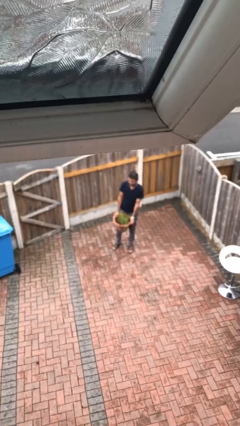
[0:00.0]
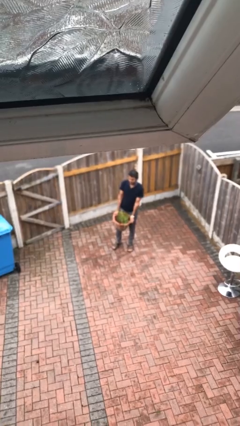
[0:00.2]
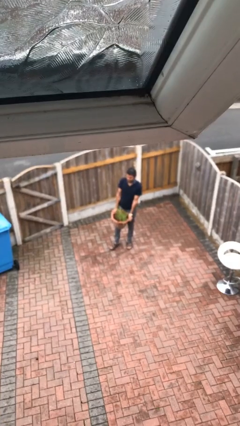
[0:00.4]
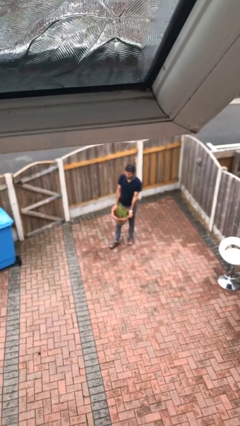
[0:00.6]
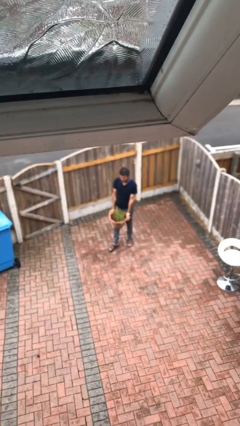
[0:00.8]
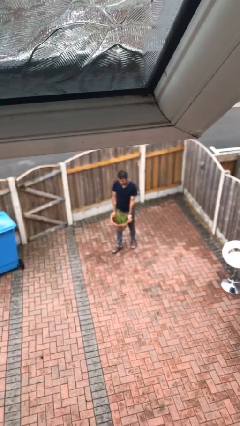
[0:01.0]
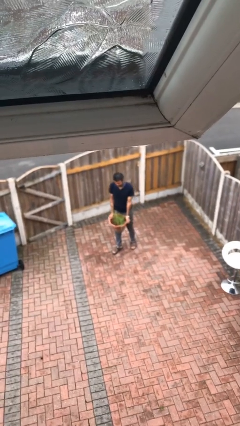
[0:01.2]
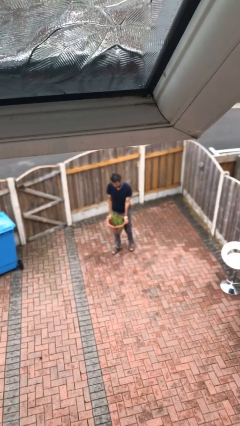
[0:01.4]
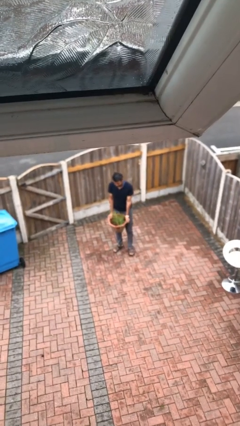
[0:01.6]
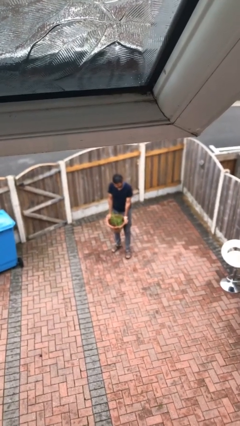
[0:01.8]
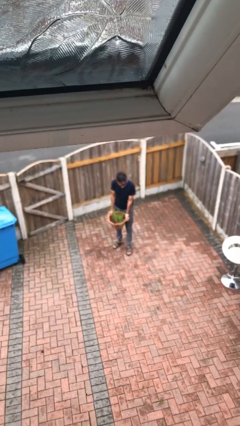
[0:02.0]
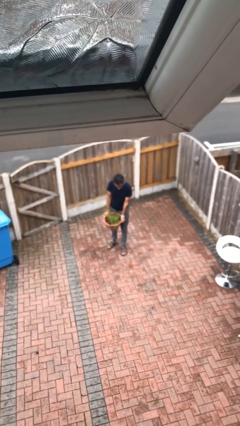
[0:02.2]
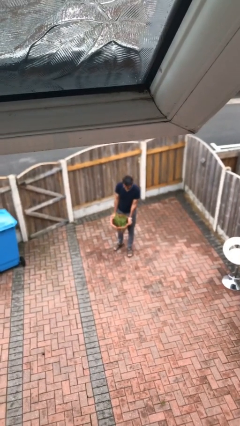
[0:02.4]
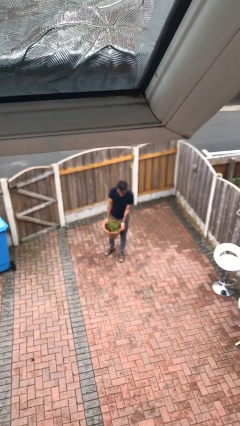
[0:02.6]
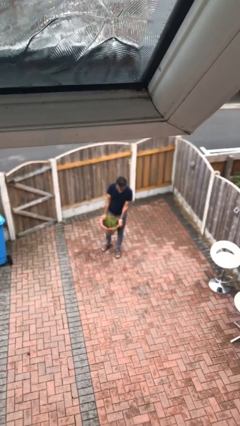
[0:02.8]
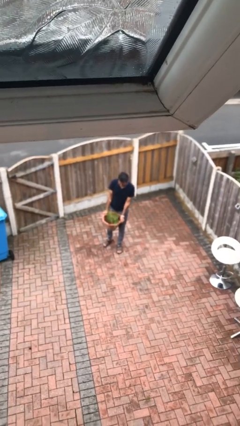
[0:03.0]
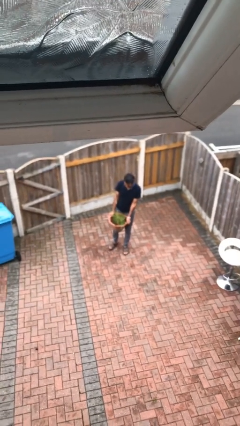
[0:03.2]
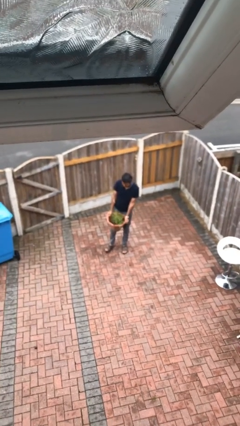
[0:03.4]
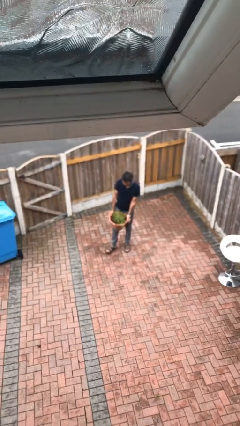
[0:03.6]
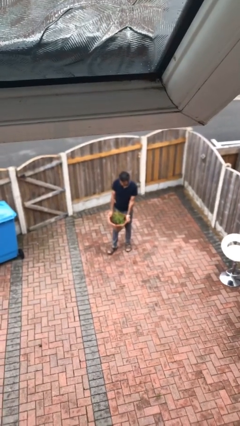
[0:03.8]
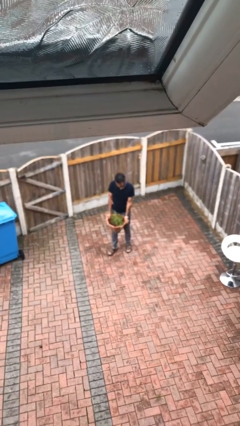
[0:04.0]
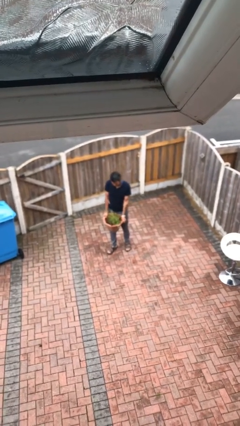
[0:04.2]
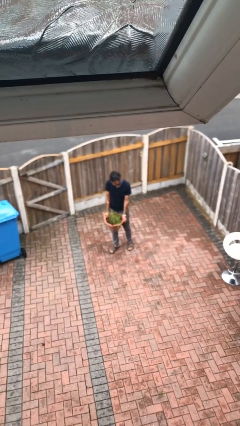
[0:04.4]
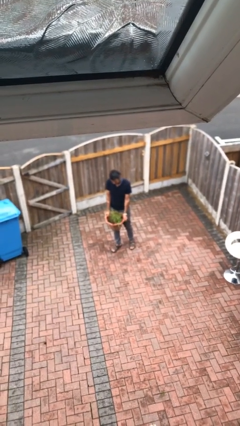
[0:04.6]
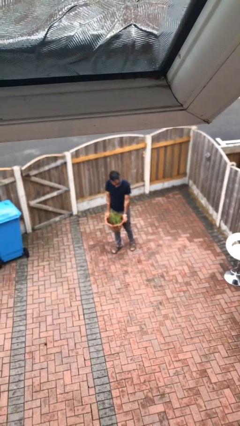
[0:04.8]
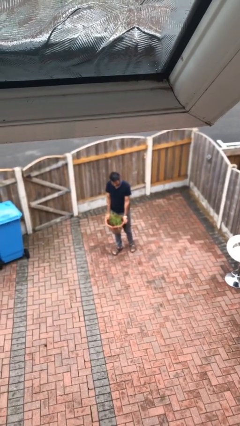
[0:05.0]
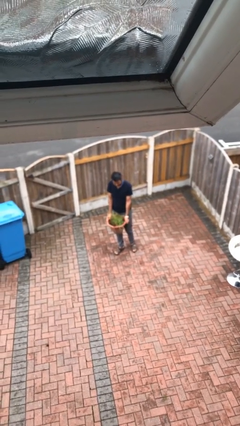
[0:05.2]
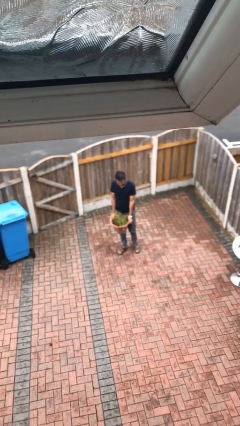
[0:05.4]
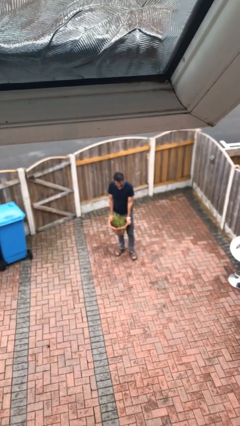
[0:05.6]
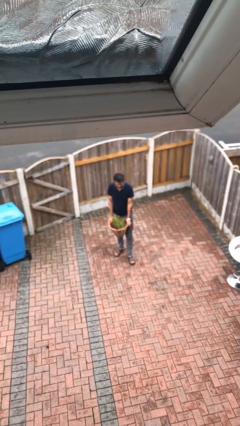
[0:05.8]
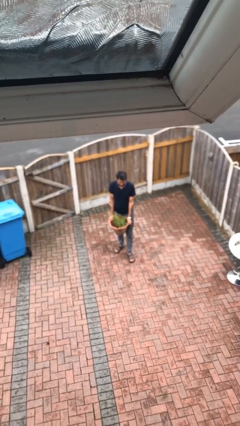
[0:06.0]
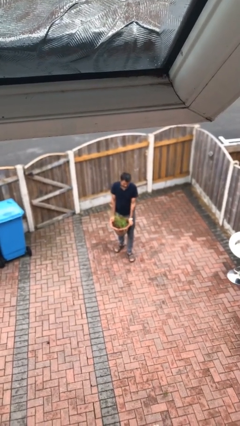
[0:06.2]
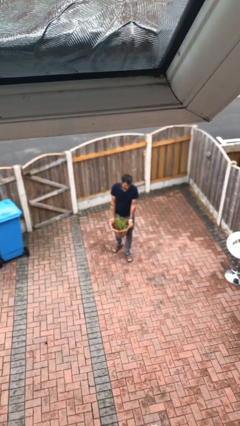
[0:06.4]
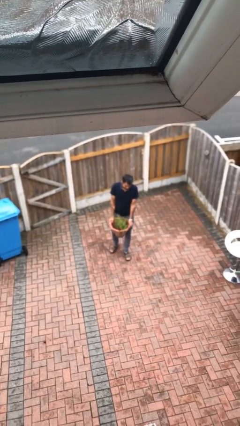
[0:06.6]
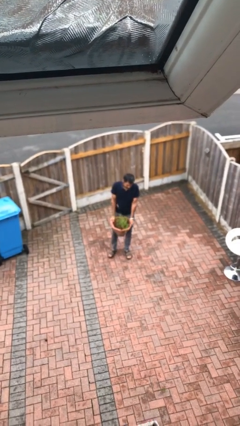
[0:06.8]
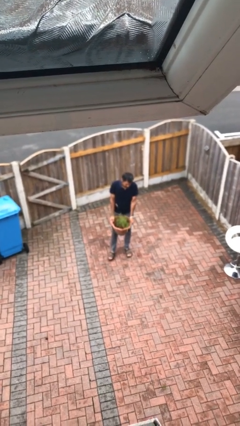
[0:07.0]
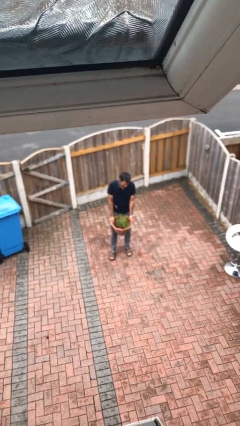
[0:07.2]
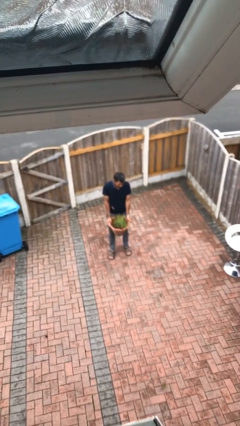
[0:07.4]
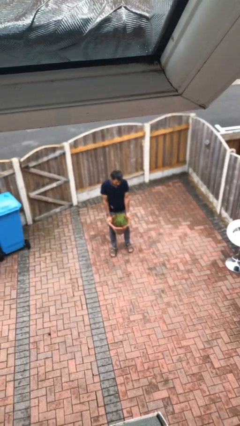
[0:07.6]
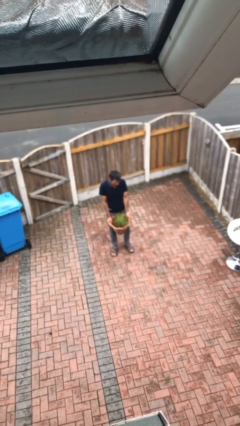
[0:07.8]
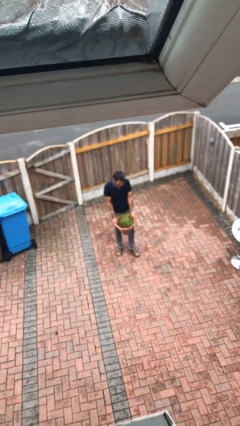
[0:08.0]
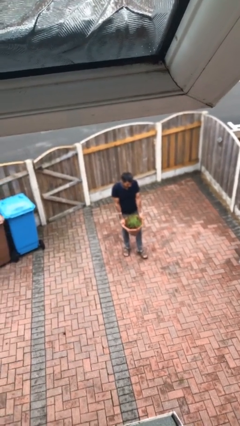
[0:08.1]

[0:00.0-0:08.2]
person carries heavy object

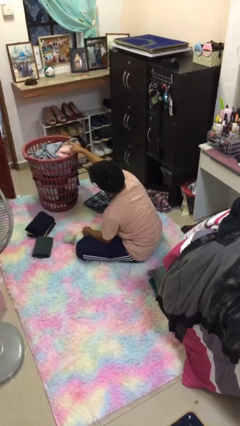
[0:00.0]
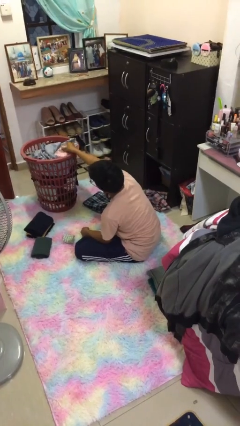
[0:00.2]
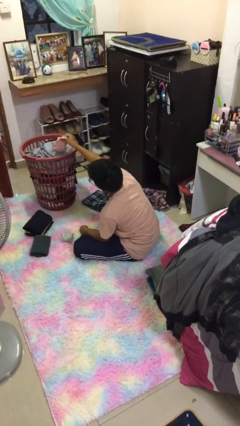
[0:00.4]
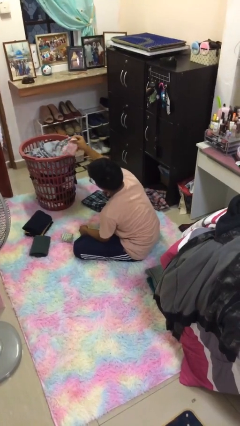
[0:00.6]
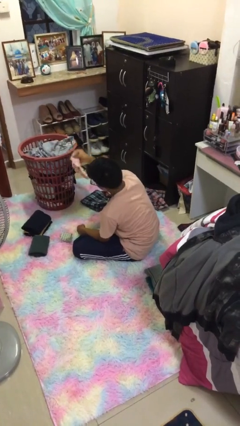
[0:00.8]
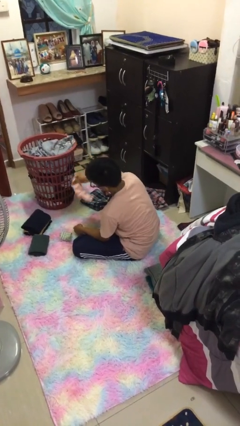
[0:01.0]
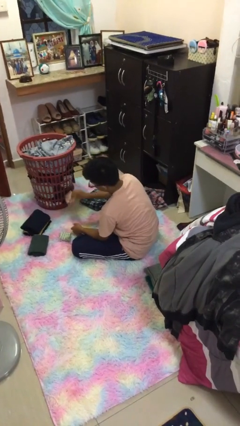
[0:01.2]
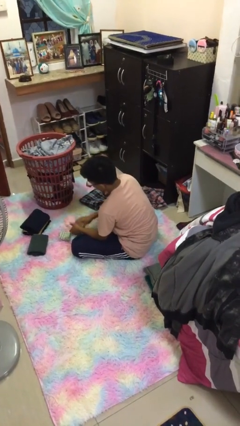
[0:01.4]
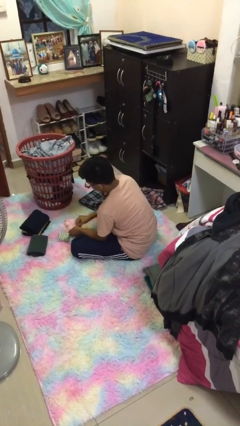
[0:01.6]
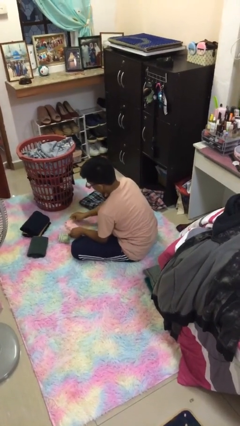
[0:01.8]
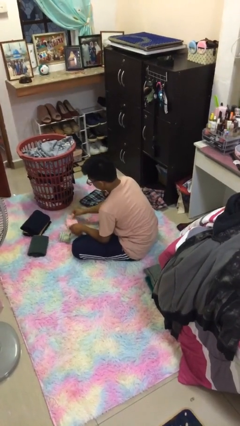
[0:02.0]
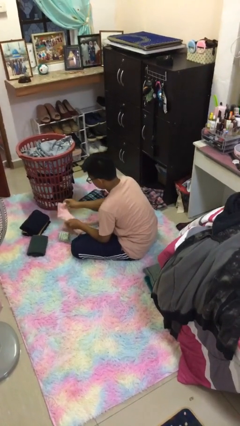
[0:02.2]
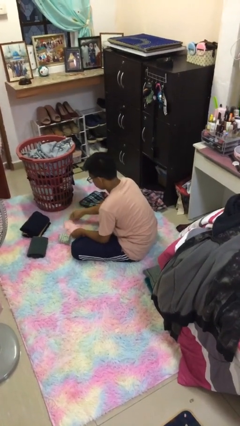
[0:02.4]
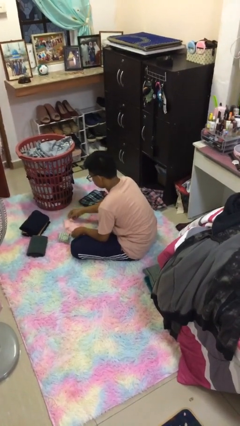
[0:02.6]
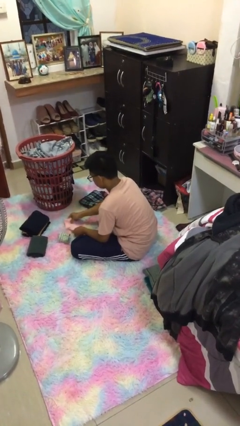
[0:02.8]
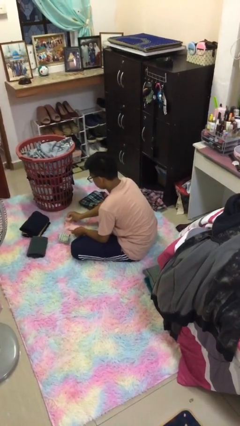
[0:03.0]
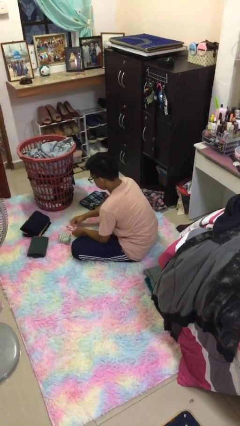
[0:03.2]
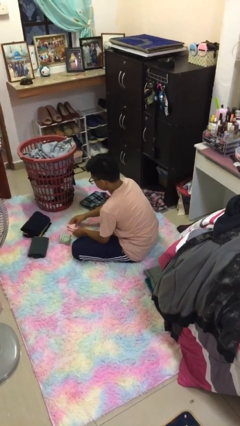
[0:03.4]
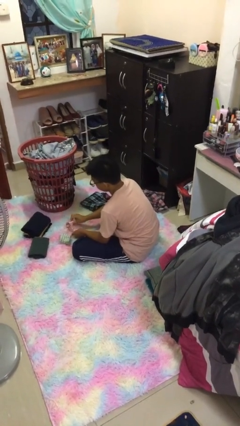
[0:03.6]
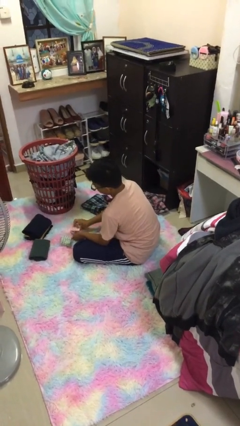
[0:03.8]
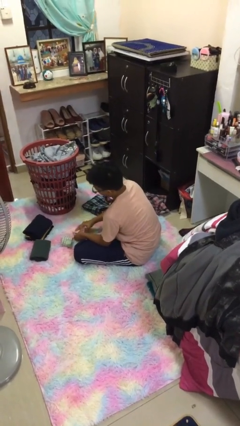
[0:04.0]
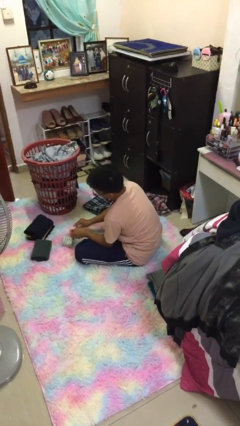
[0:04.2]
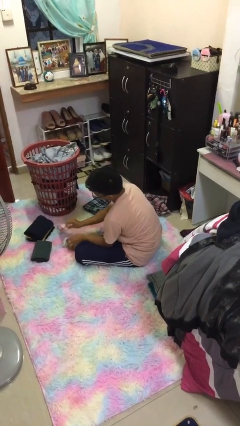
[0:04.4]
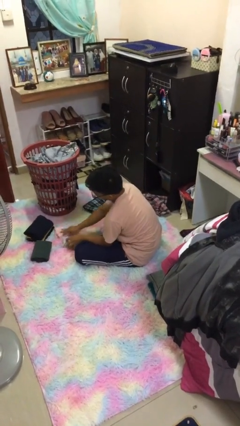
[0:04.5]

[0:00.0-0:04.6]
person folds socks

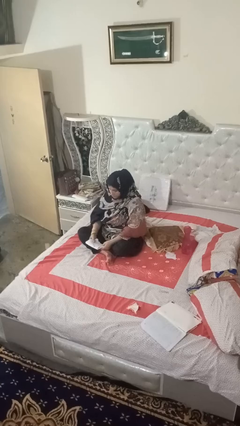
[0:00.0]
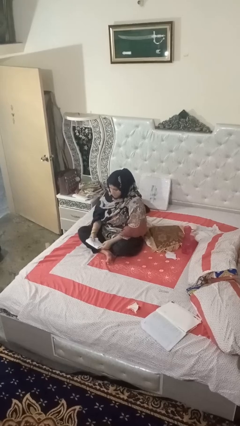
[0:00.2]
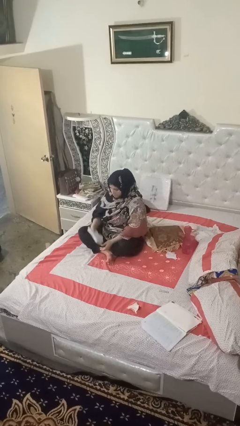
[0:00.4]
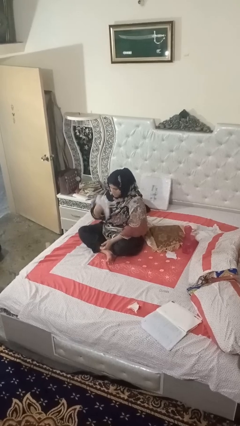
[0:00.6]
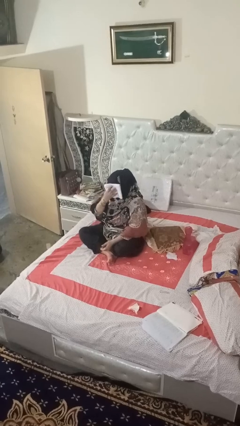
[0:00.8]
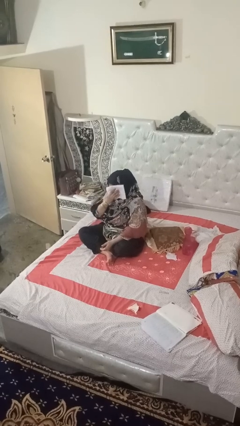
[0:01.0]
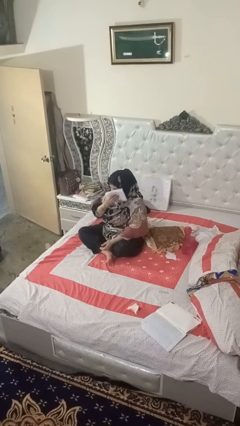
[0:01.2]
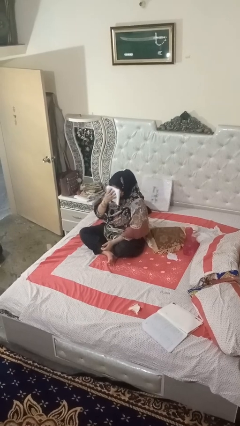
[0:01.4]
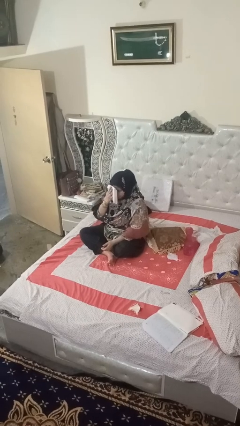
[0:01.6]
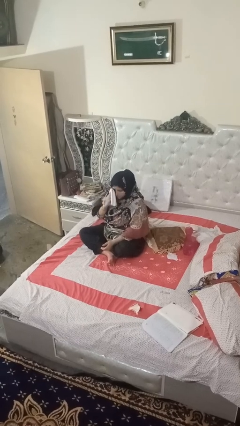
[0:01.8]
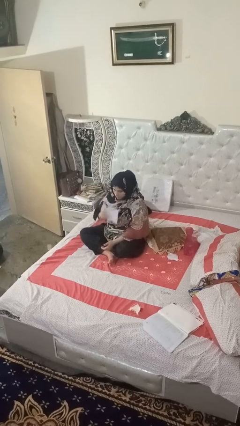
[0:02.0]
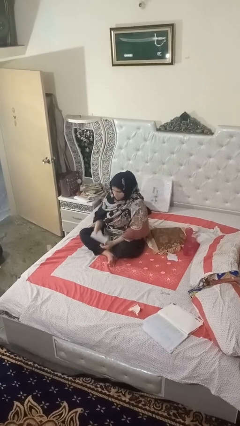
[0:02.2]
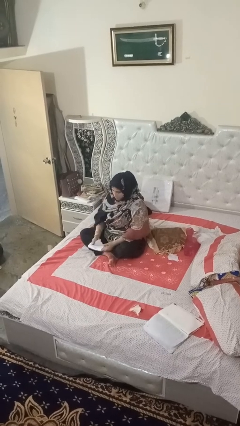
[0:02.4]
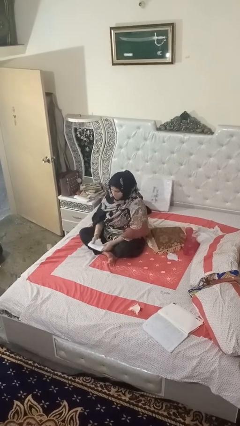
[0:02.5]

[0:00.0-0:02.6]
person wipes mouth with napkin

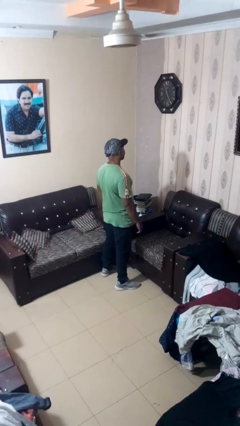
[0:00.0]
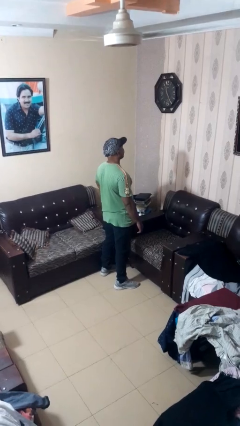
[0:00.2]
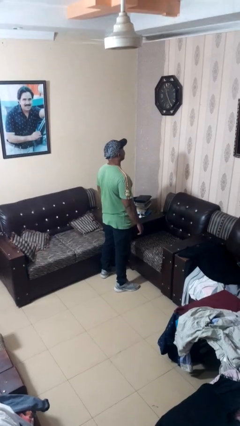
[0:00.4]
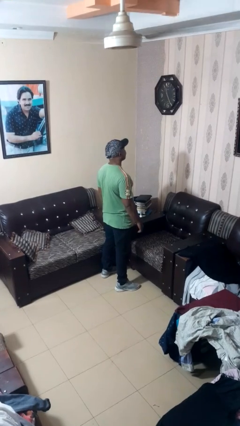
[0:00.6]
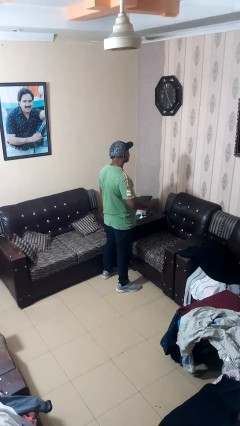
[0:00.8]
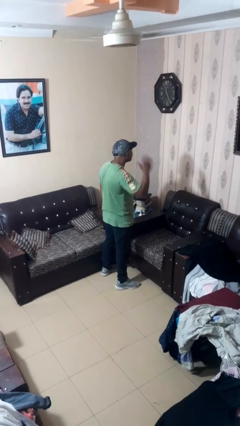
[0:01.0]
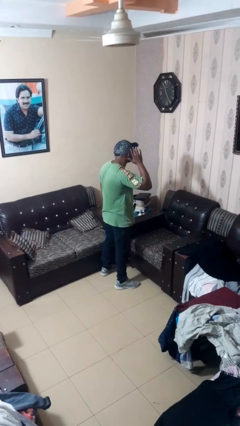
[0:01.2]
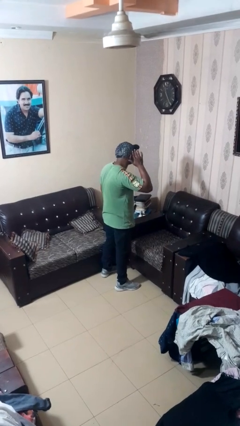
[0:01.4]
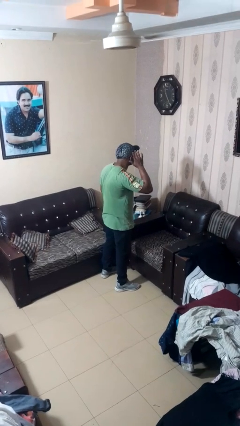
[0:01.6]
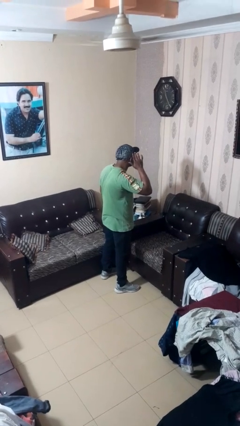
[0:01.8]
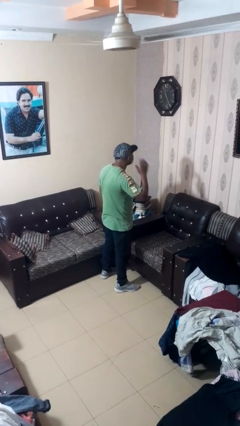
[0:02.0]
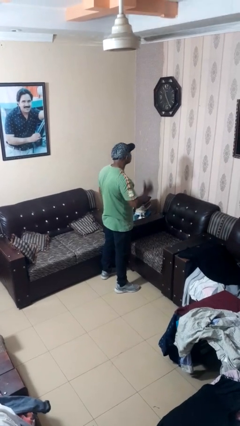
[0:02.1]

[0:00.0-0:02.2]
person gestures listen closely

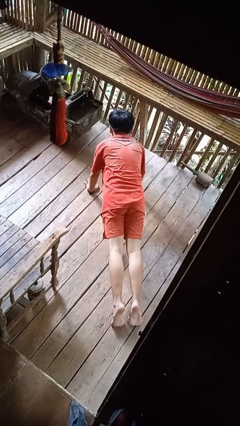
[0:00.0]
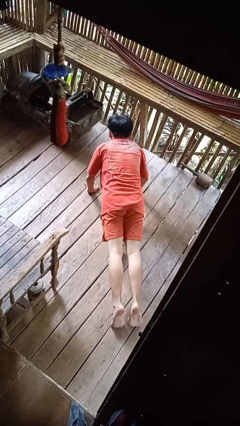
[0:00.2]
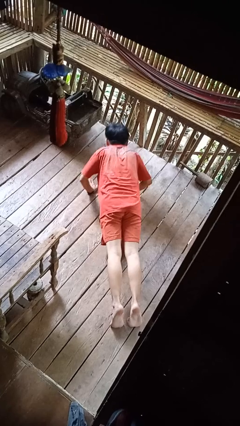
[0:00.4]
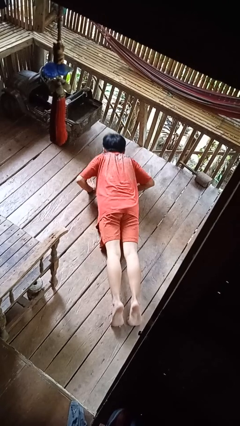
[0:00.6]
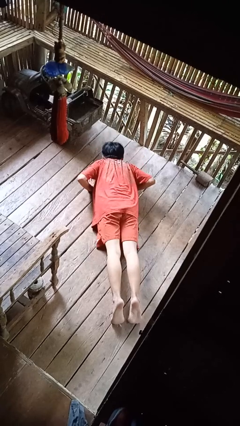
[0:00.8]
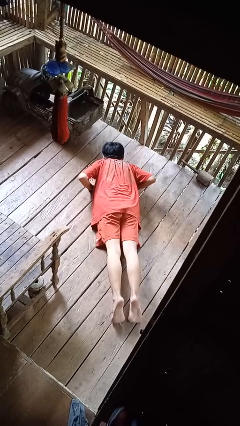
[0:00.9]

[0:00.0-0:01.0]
person exercises with pushup
